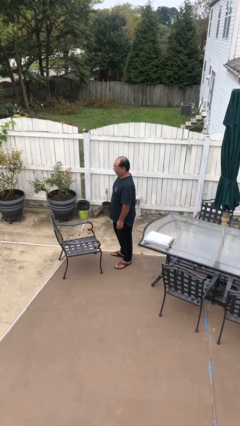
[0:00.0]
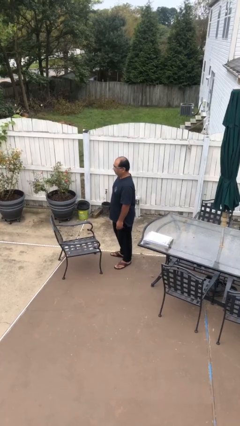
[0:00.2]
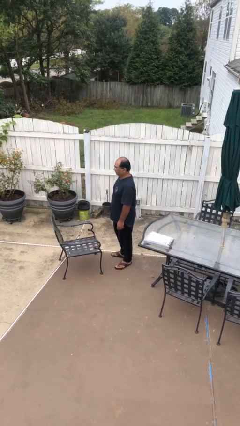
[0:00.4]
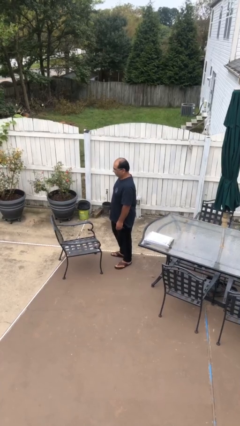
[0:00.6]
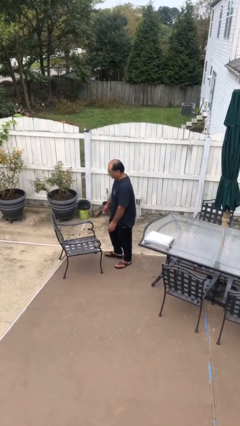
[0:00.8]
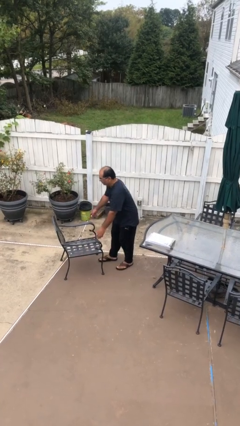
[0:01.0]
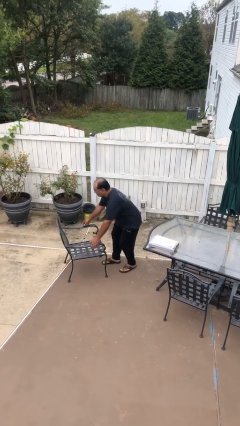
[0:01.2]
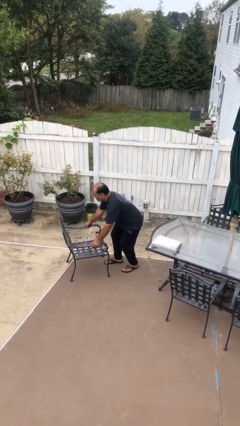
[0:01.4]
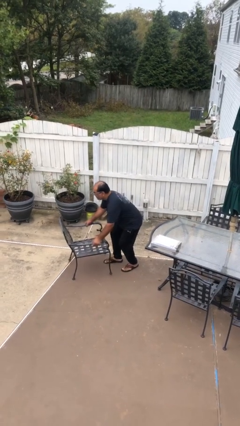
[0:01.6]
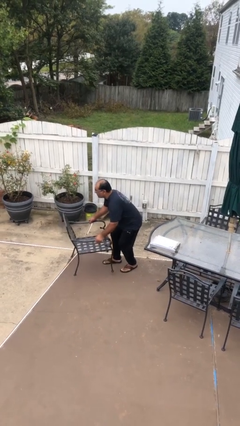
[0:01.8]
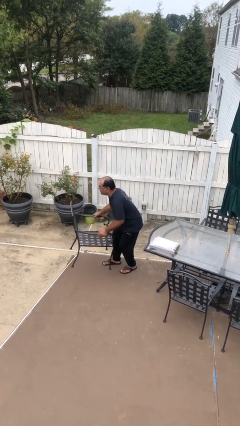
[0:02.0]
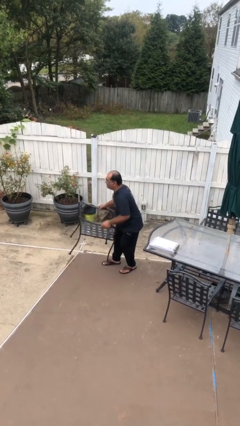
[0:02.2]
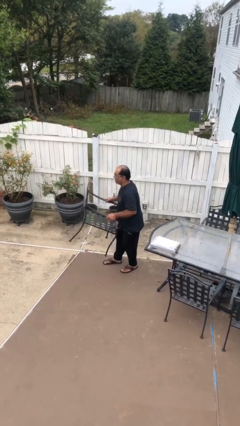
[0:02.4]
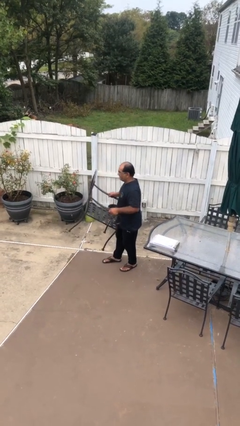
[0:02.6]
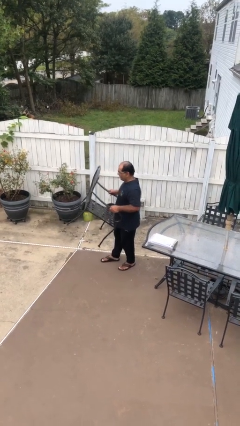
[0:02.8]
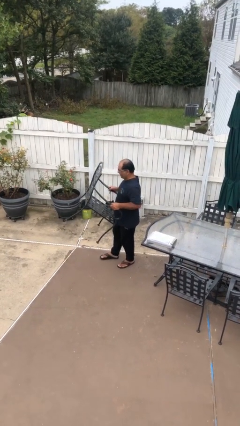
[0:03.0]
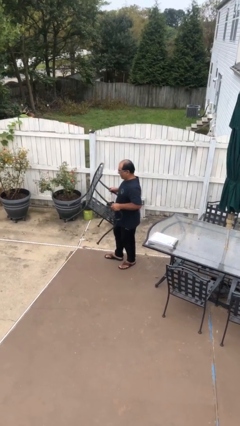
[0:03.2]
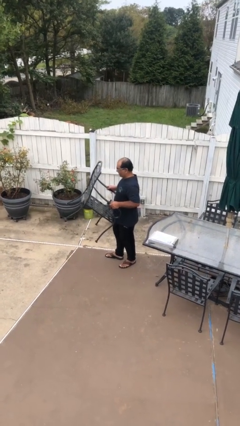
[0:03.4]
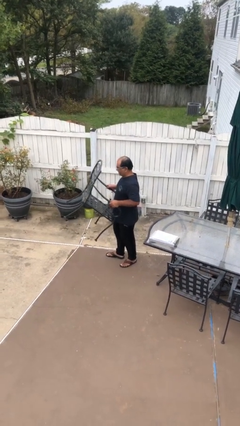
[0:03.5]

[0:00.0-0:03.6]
person picks up object from floor

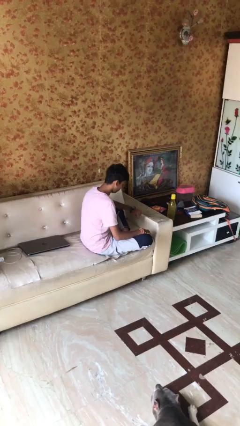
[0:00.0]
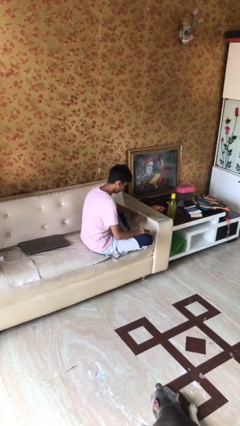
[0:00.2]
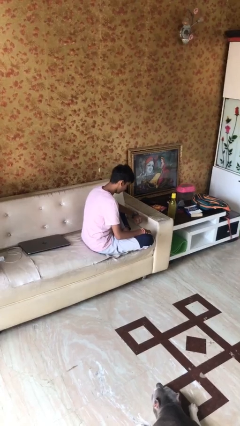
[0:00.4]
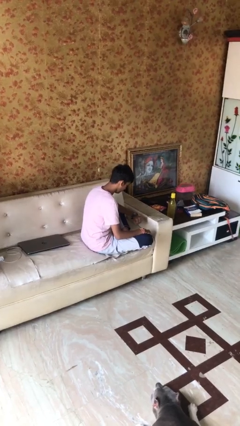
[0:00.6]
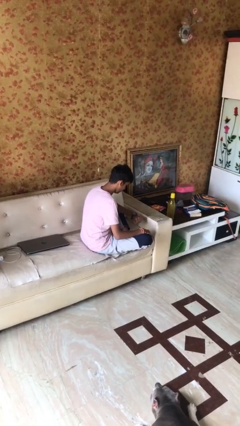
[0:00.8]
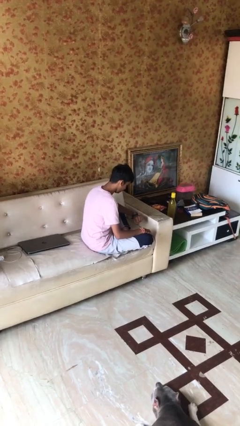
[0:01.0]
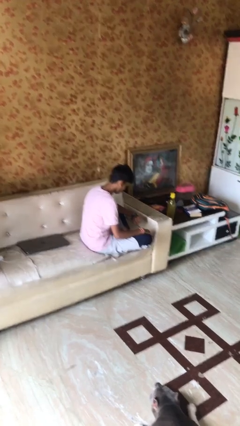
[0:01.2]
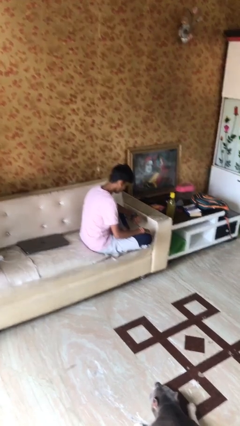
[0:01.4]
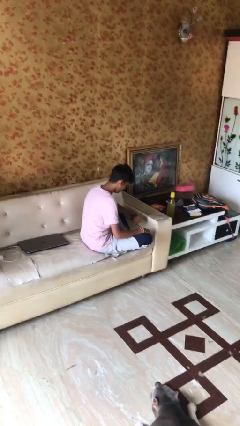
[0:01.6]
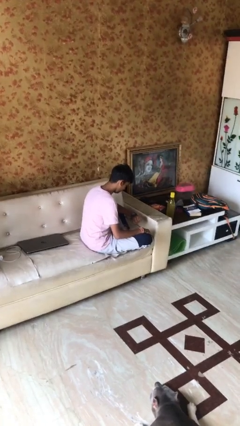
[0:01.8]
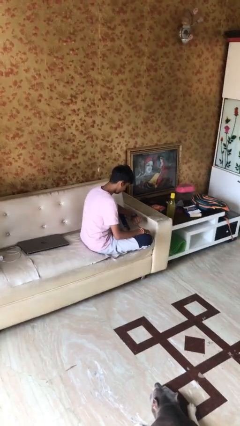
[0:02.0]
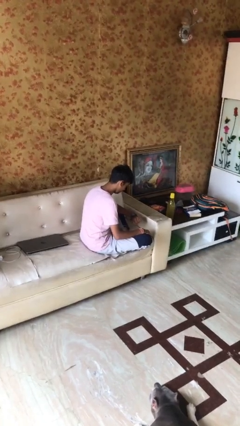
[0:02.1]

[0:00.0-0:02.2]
person looks at wristwatch

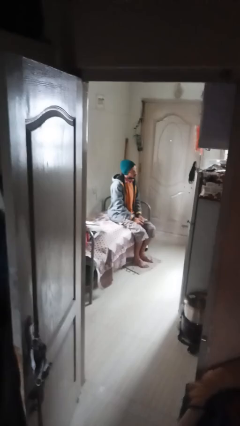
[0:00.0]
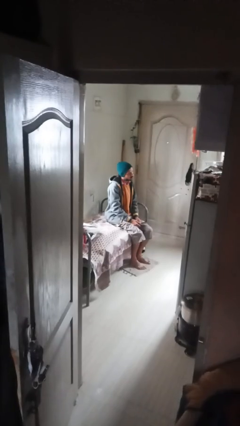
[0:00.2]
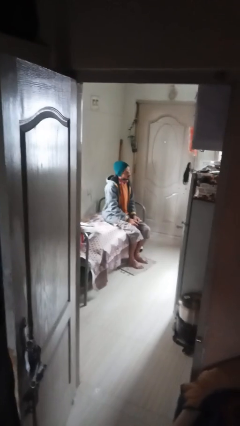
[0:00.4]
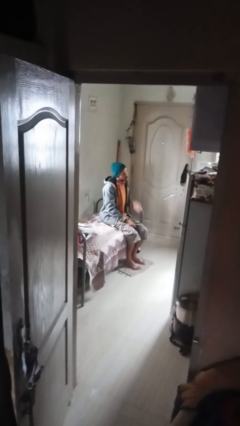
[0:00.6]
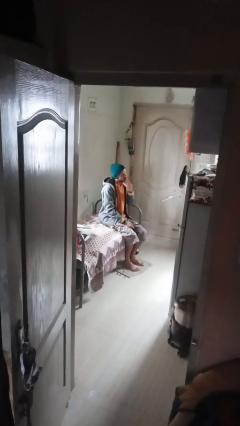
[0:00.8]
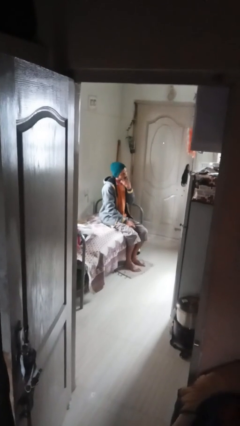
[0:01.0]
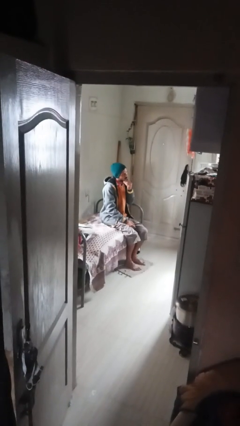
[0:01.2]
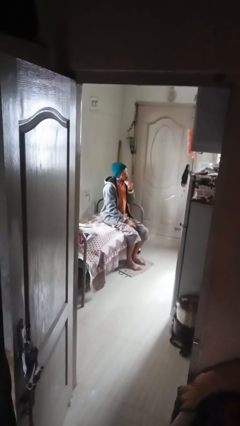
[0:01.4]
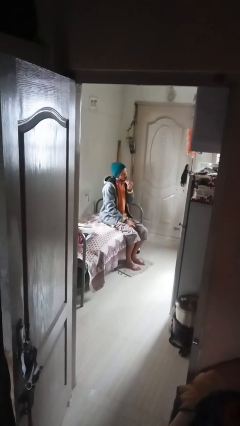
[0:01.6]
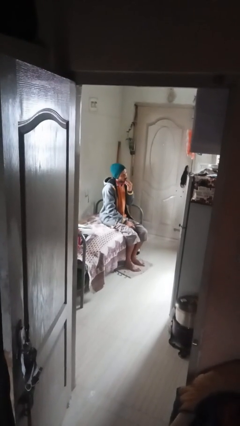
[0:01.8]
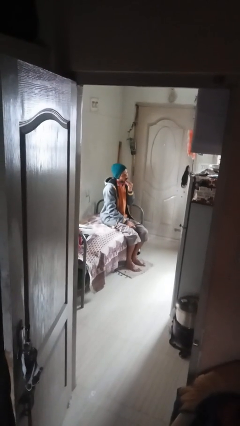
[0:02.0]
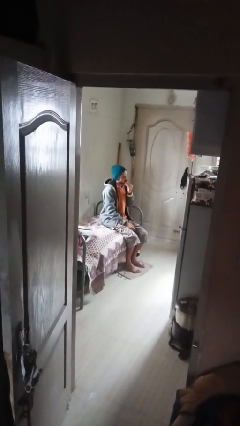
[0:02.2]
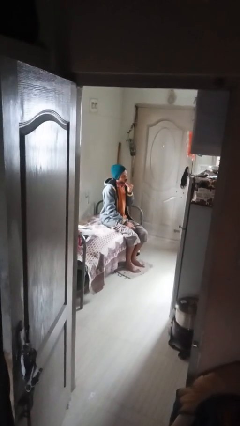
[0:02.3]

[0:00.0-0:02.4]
person strokes chin

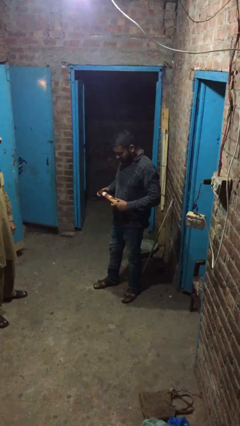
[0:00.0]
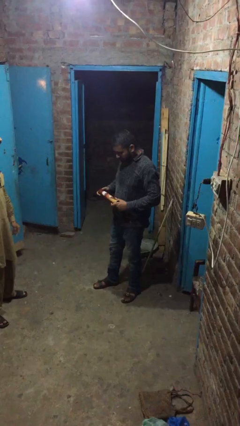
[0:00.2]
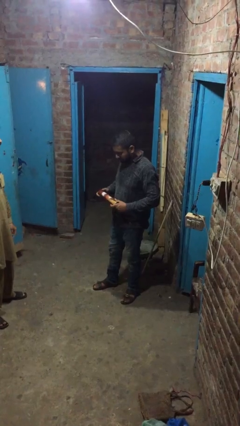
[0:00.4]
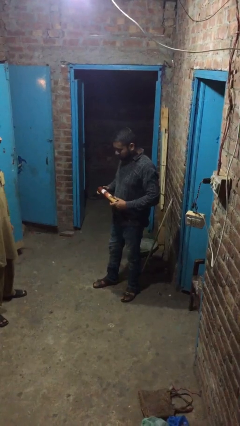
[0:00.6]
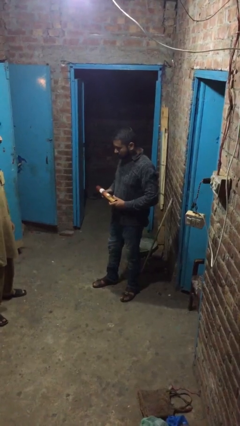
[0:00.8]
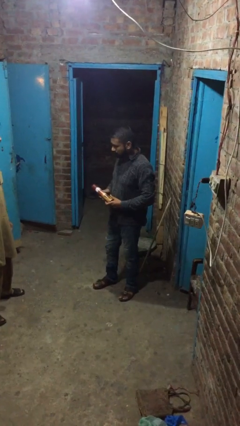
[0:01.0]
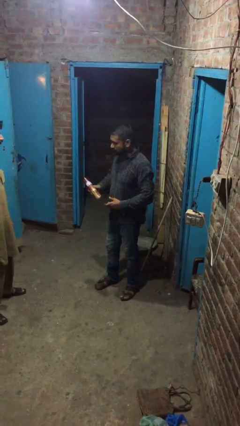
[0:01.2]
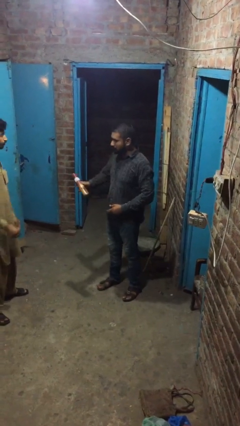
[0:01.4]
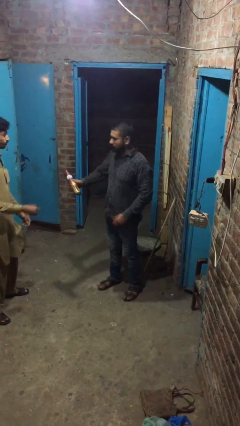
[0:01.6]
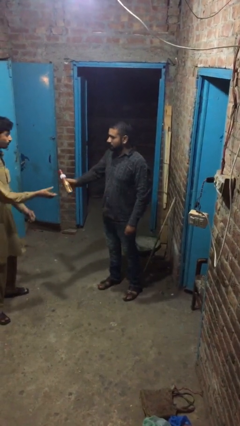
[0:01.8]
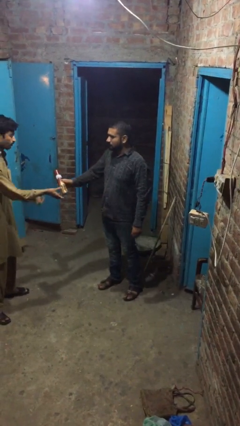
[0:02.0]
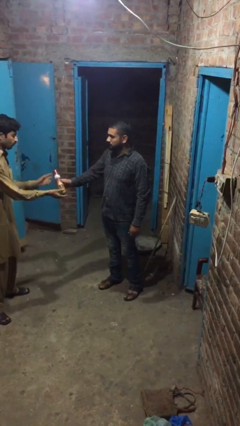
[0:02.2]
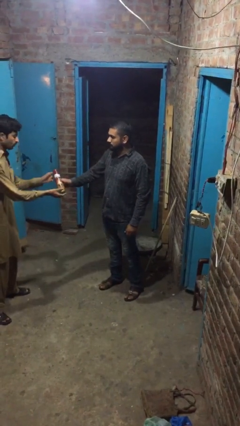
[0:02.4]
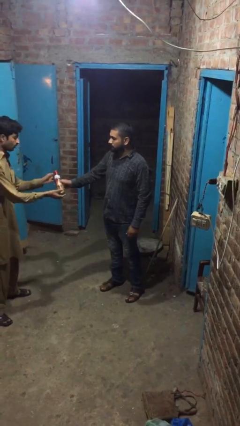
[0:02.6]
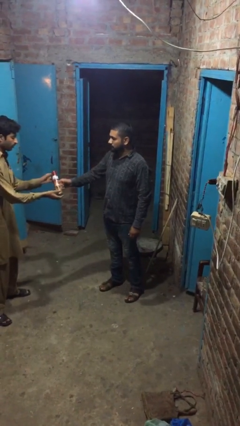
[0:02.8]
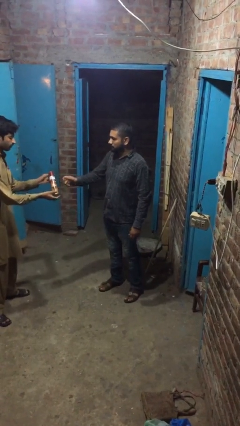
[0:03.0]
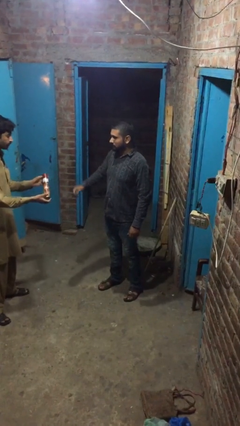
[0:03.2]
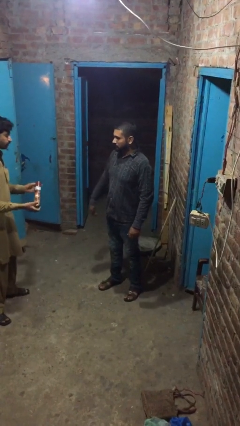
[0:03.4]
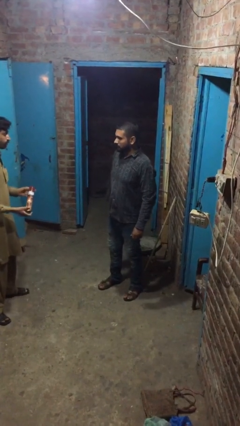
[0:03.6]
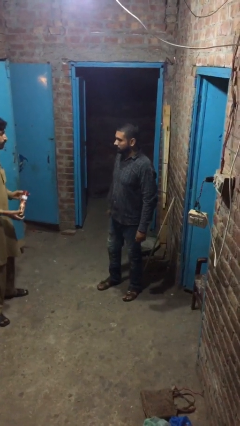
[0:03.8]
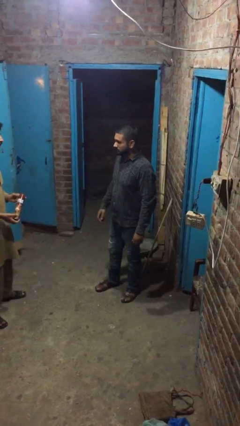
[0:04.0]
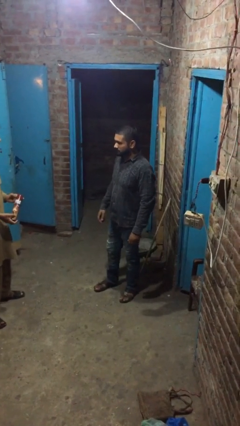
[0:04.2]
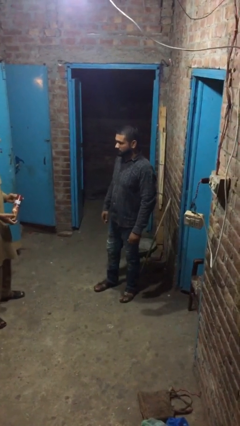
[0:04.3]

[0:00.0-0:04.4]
person transfers object to person

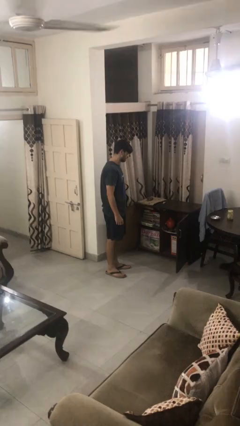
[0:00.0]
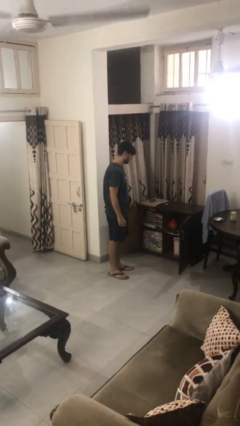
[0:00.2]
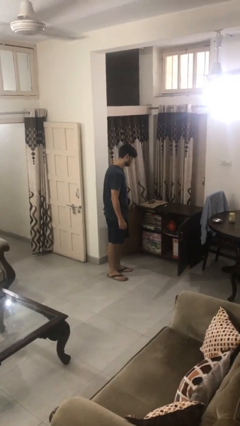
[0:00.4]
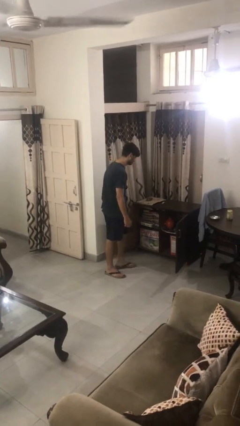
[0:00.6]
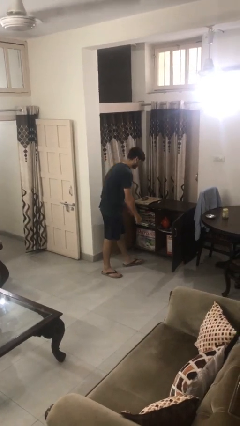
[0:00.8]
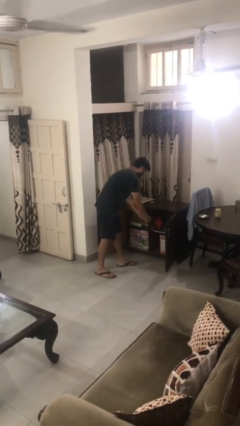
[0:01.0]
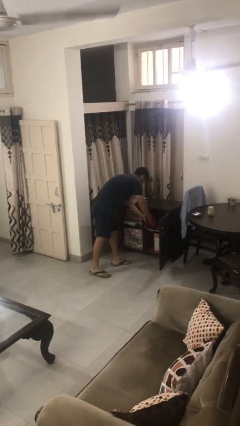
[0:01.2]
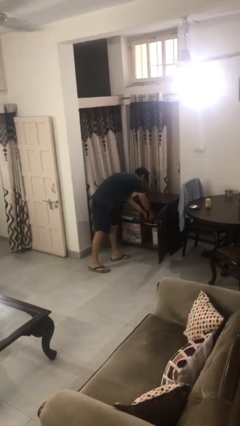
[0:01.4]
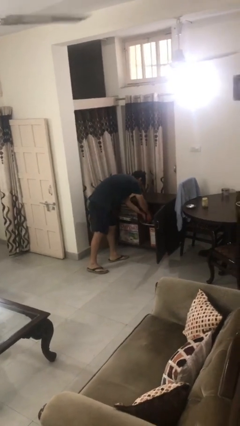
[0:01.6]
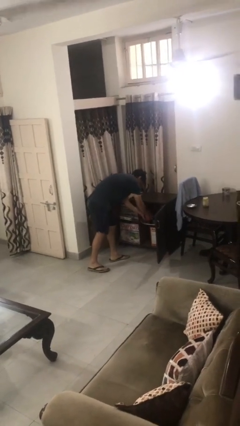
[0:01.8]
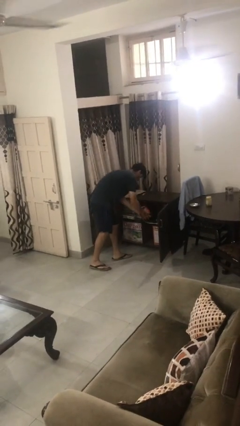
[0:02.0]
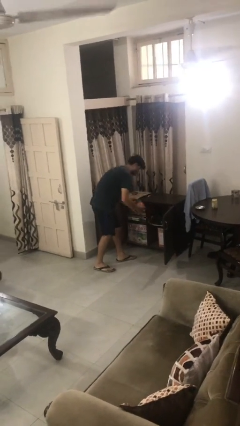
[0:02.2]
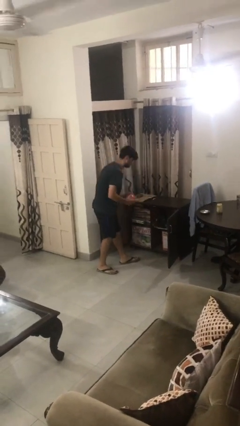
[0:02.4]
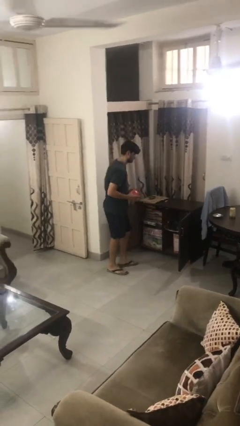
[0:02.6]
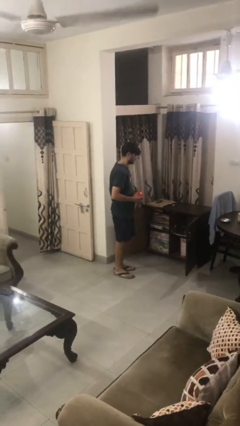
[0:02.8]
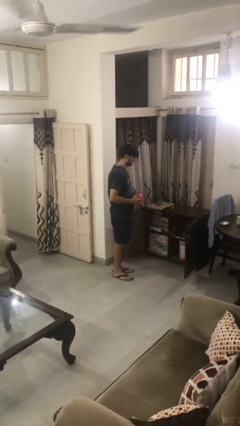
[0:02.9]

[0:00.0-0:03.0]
person picks up object from cabinet

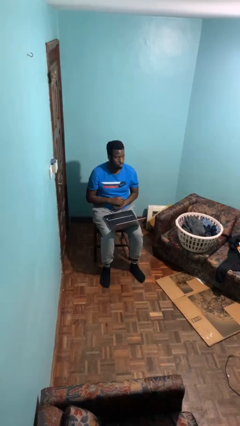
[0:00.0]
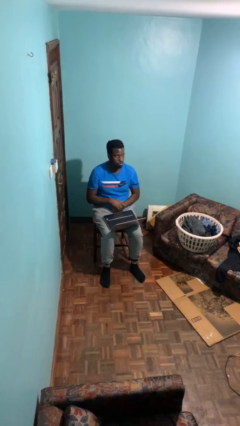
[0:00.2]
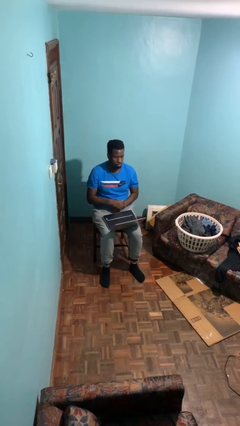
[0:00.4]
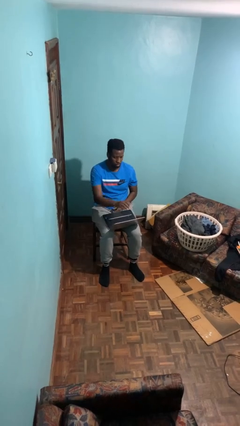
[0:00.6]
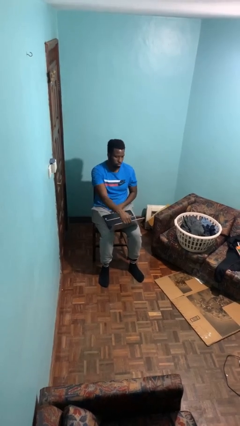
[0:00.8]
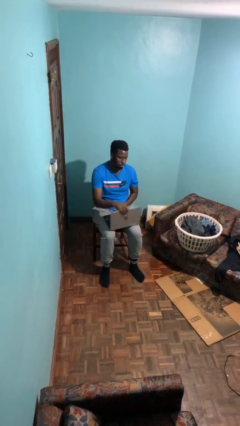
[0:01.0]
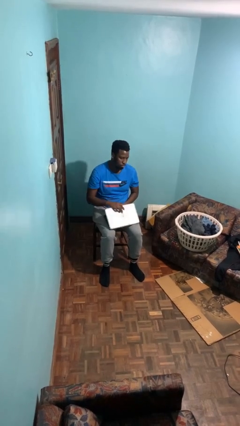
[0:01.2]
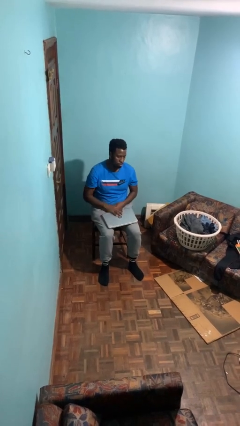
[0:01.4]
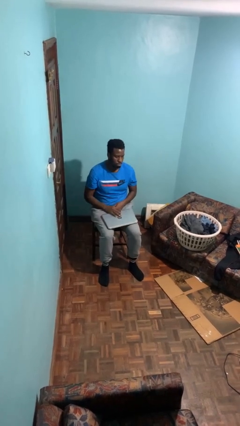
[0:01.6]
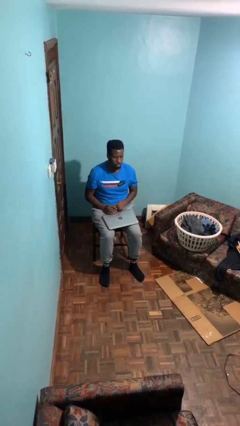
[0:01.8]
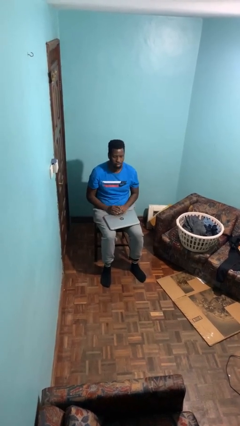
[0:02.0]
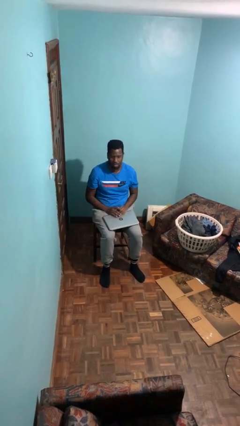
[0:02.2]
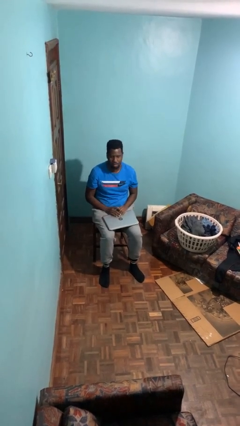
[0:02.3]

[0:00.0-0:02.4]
person closes laptop
